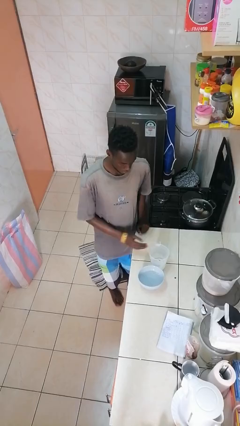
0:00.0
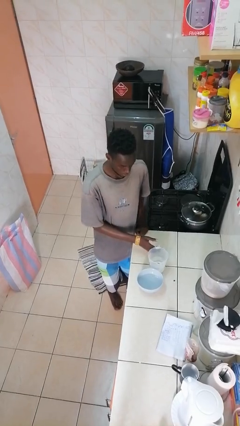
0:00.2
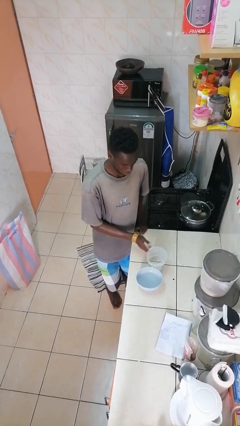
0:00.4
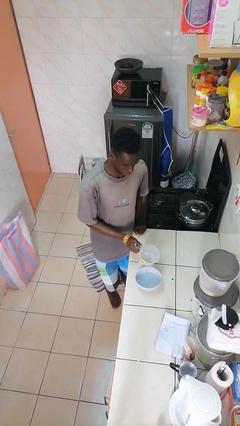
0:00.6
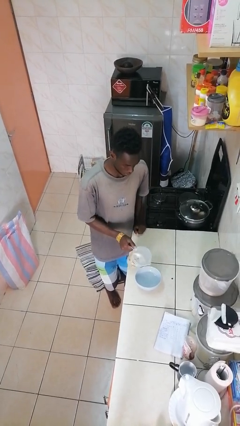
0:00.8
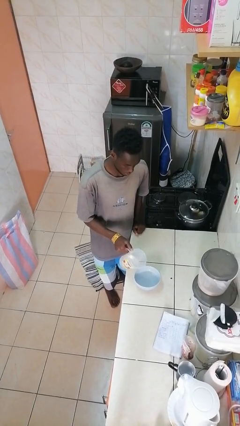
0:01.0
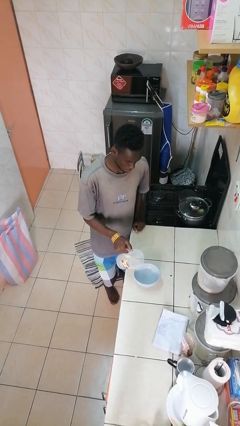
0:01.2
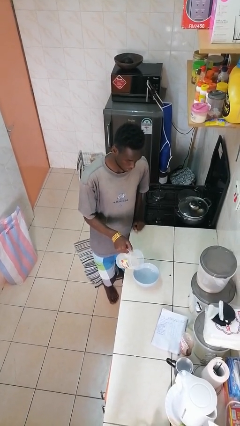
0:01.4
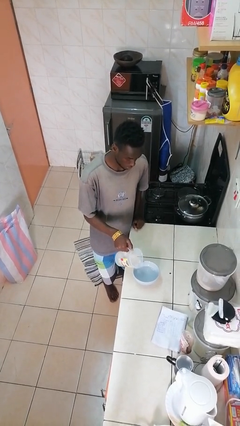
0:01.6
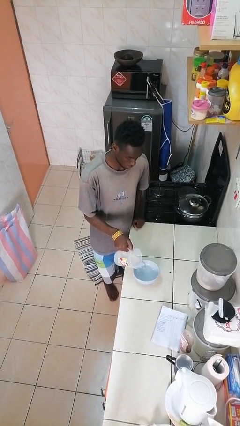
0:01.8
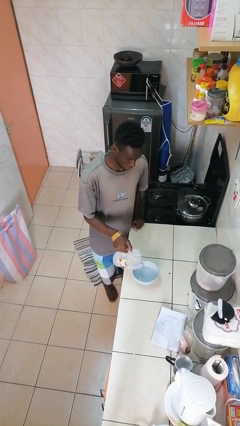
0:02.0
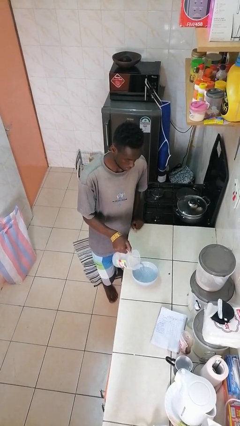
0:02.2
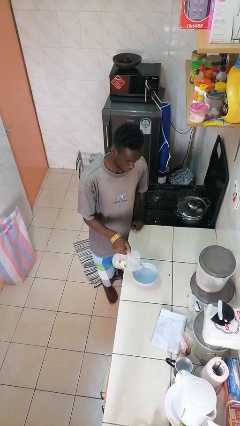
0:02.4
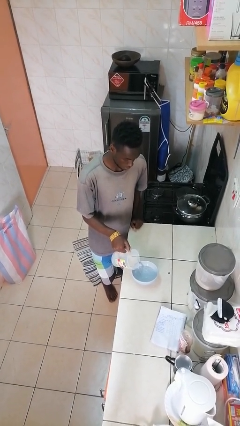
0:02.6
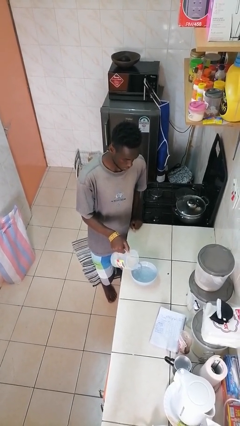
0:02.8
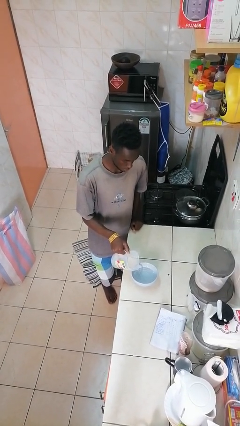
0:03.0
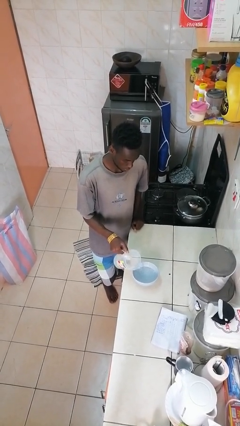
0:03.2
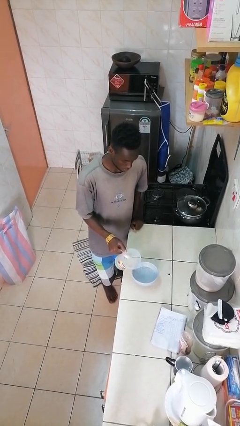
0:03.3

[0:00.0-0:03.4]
person pours into bowl

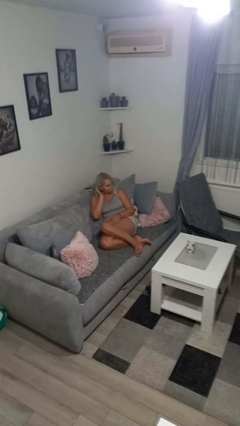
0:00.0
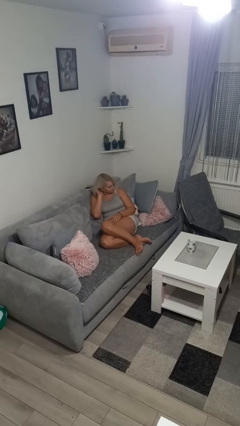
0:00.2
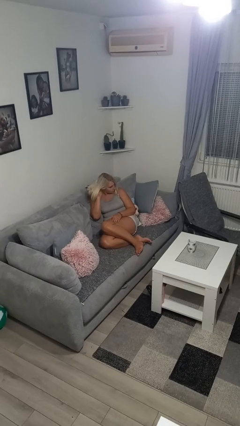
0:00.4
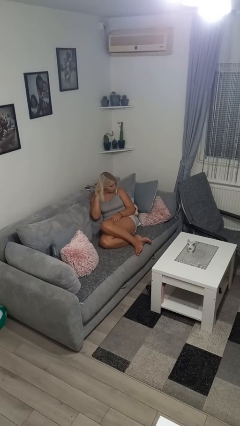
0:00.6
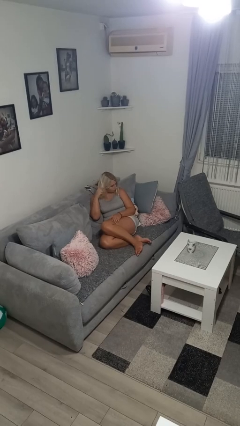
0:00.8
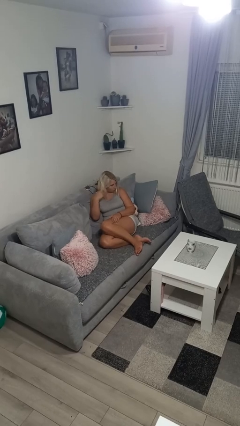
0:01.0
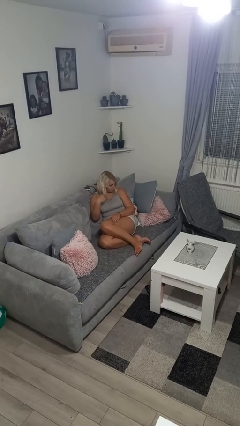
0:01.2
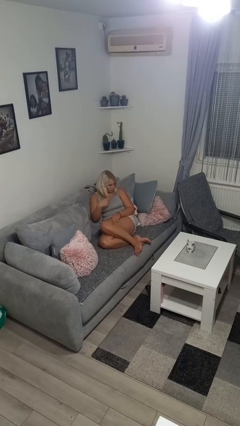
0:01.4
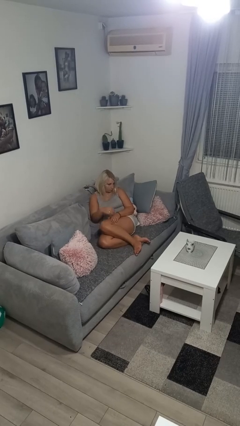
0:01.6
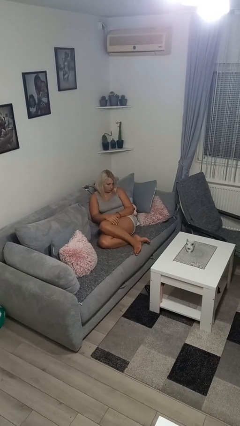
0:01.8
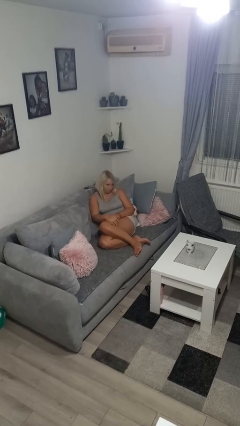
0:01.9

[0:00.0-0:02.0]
person strokes hair

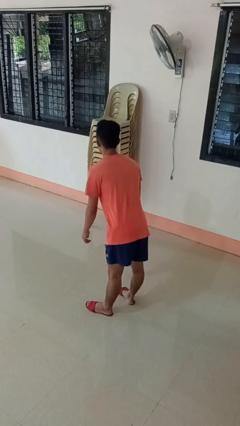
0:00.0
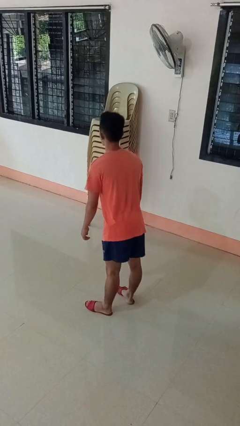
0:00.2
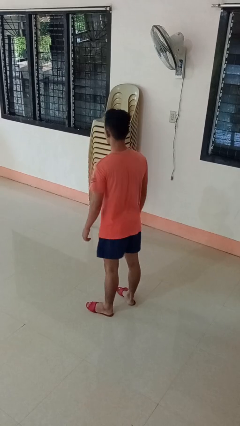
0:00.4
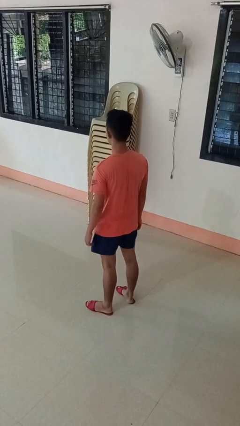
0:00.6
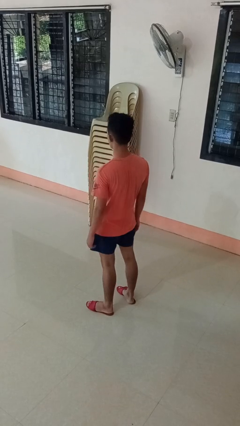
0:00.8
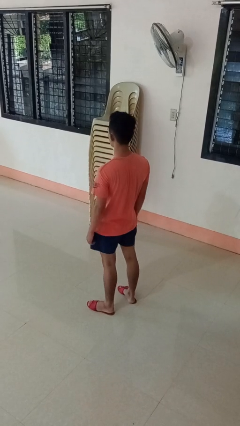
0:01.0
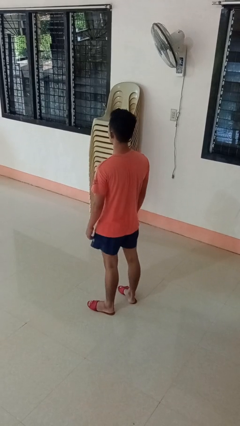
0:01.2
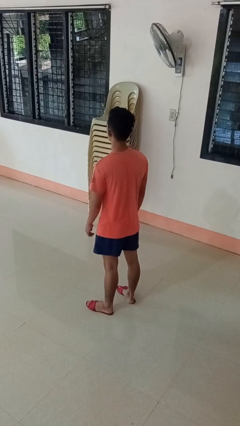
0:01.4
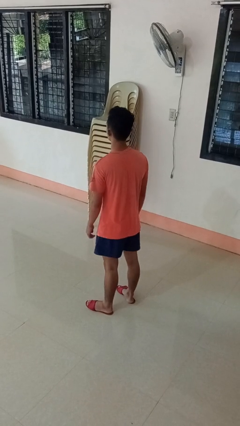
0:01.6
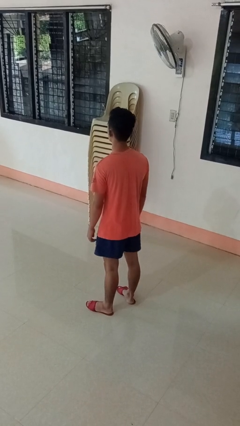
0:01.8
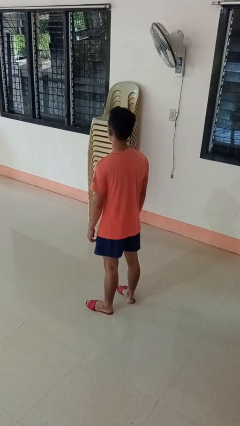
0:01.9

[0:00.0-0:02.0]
person wiggles hips

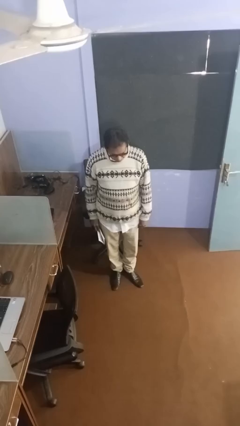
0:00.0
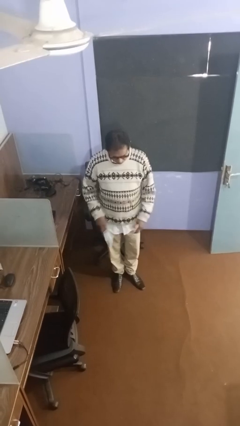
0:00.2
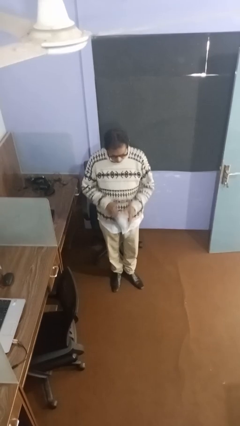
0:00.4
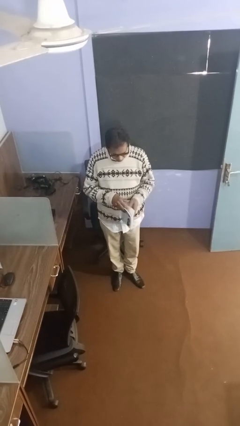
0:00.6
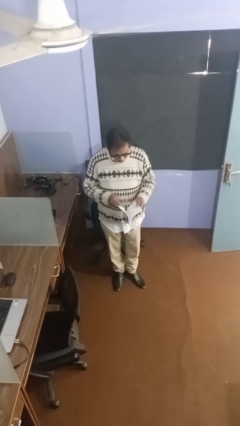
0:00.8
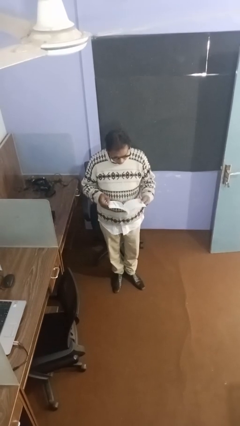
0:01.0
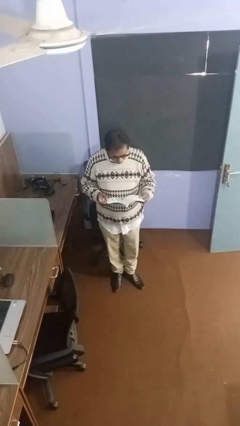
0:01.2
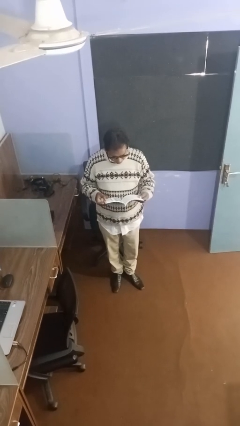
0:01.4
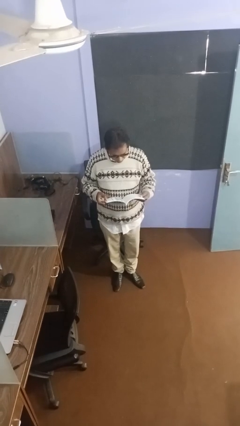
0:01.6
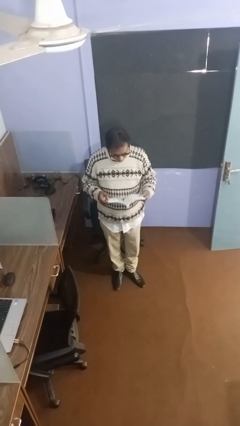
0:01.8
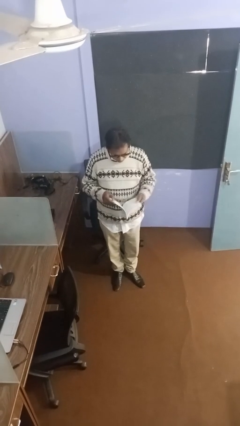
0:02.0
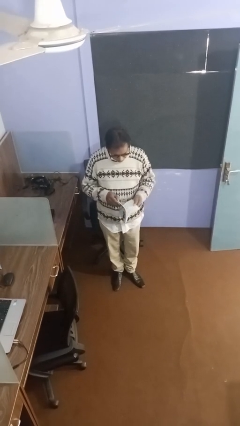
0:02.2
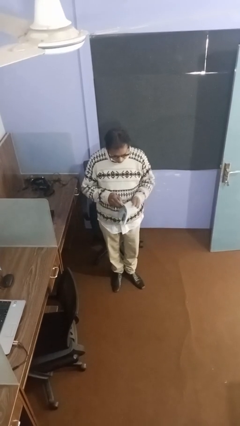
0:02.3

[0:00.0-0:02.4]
person reads document

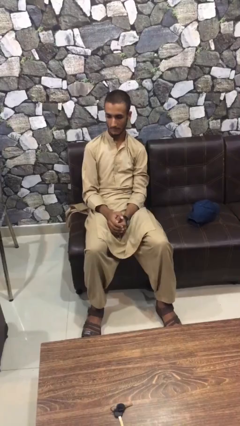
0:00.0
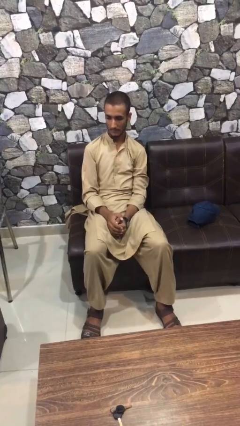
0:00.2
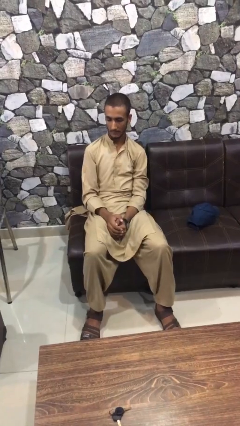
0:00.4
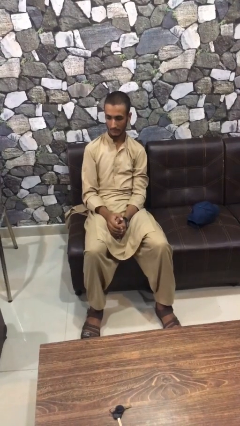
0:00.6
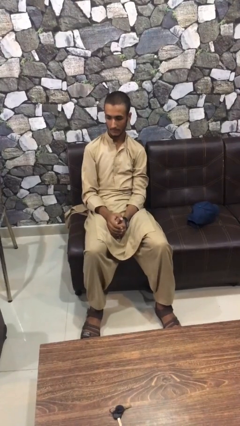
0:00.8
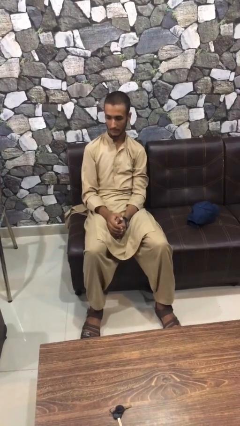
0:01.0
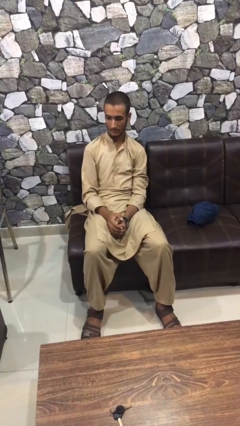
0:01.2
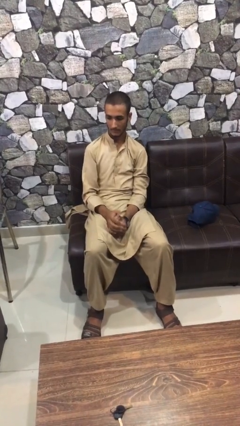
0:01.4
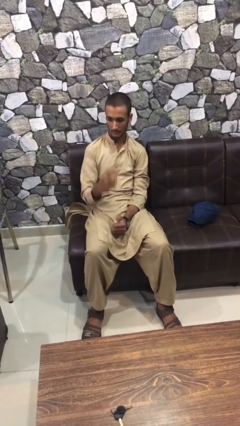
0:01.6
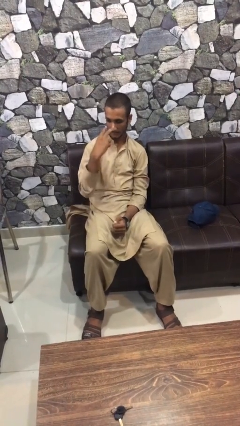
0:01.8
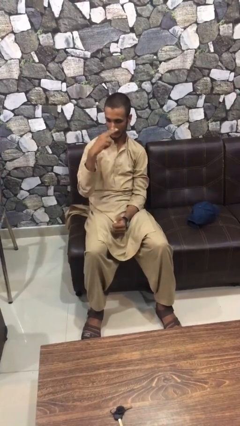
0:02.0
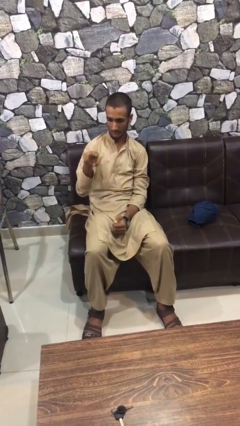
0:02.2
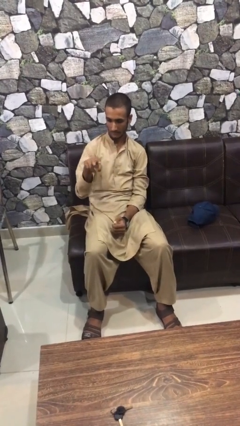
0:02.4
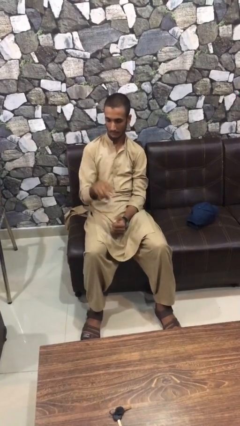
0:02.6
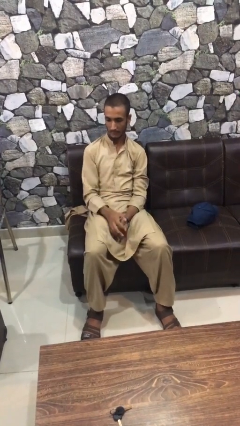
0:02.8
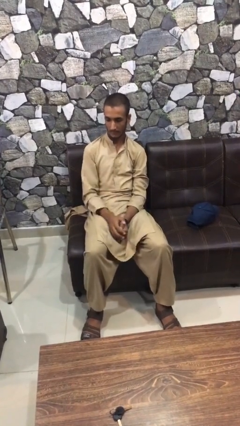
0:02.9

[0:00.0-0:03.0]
person gestures watch closely

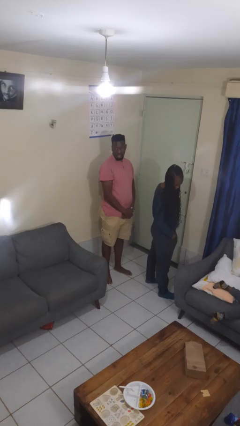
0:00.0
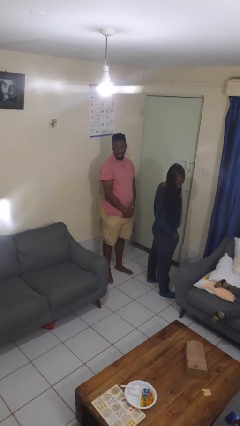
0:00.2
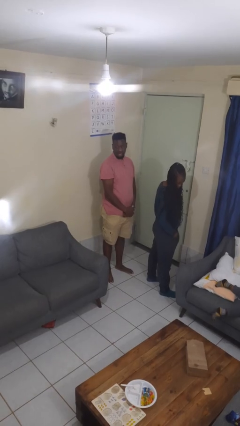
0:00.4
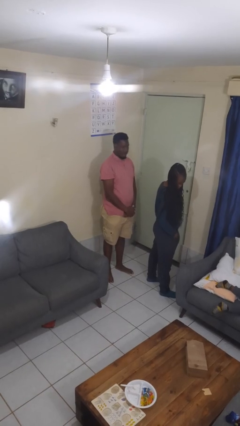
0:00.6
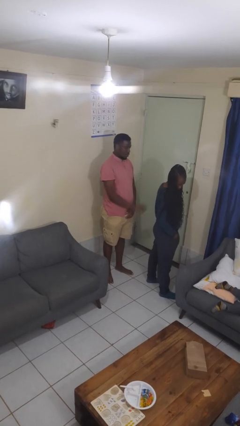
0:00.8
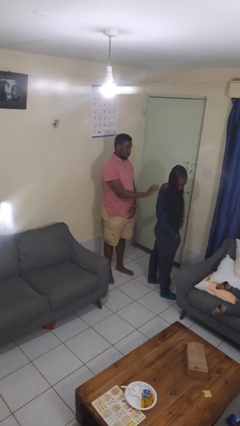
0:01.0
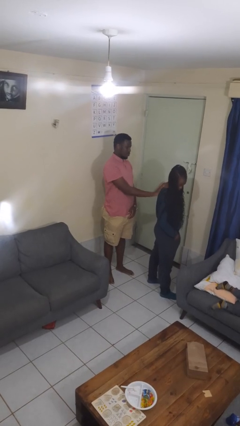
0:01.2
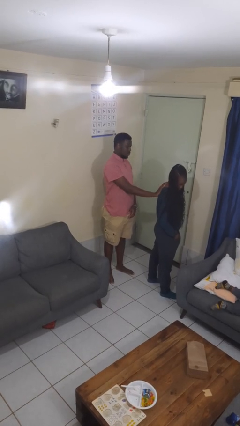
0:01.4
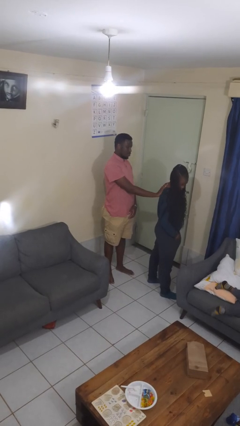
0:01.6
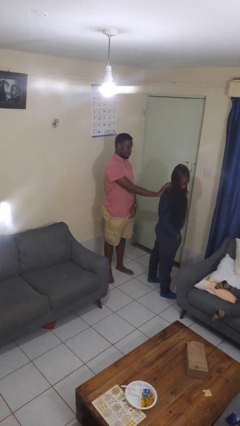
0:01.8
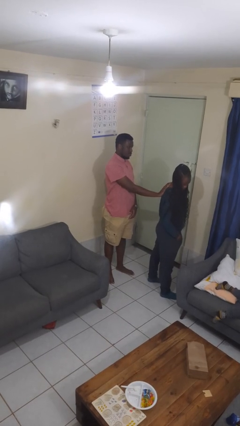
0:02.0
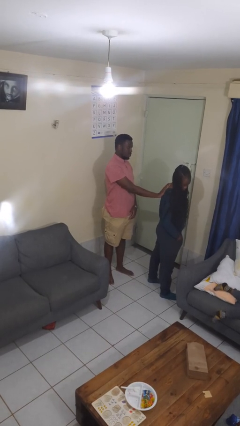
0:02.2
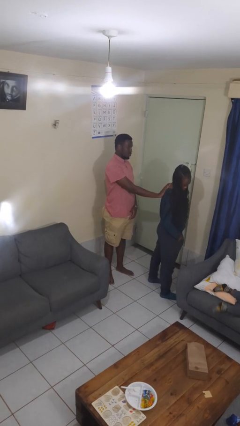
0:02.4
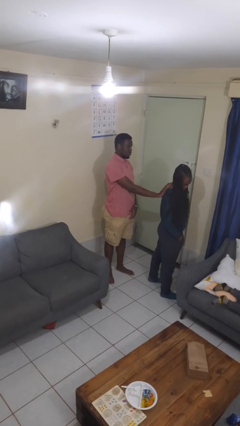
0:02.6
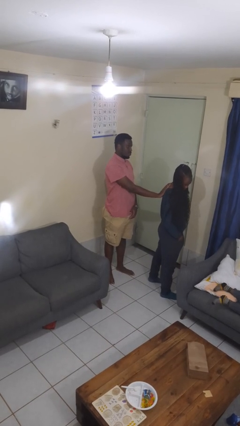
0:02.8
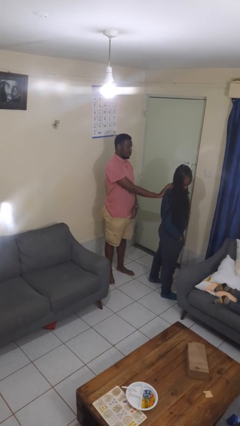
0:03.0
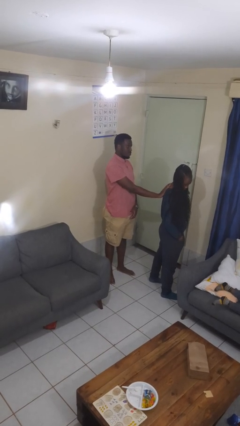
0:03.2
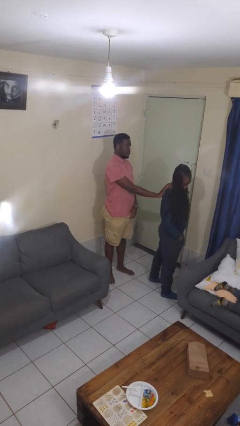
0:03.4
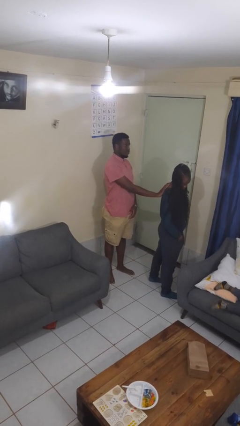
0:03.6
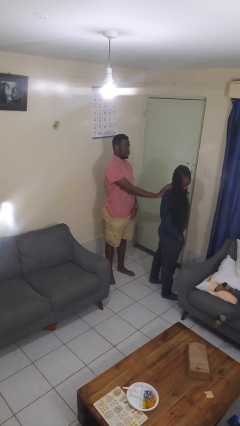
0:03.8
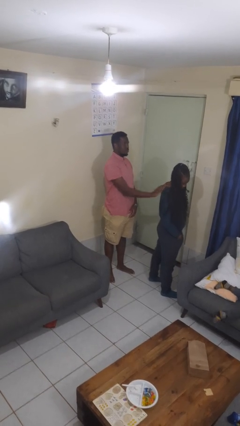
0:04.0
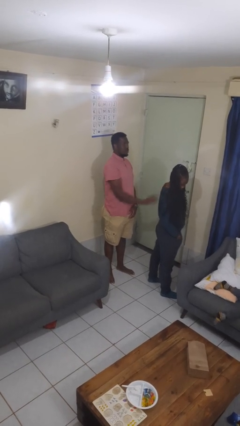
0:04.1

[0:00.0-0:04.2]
person touches back of person

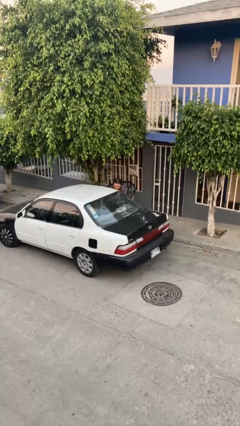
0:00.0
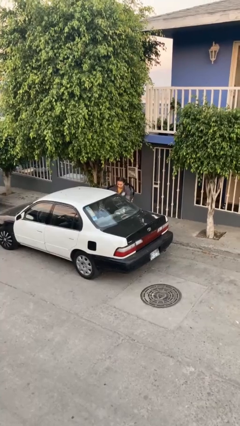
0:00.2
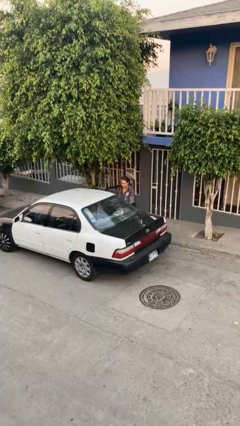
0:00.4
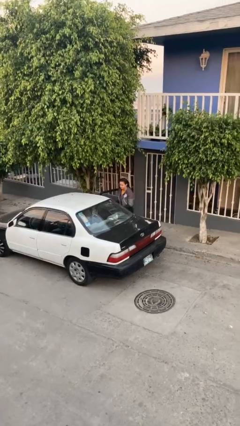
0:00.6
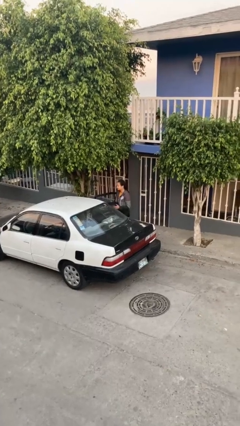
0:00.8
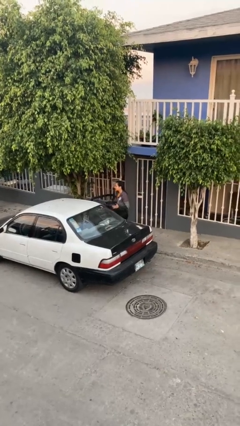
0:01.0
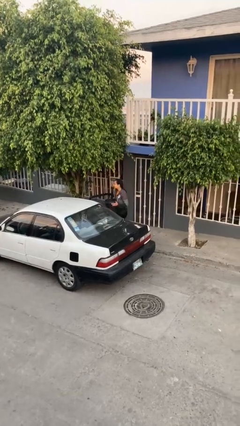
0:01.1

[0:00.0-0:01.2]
person unloads car
